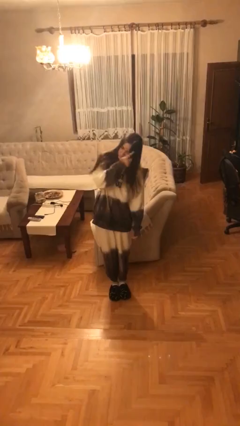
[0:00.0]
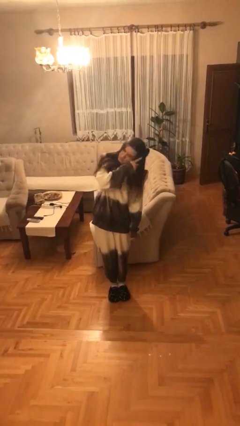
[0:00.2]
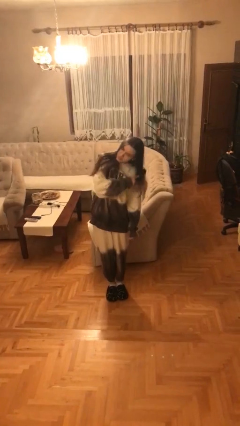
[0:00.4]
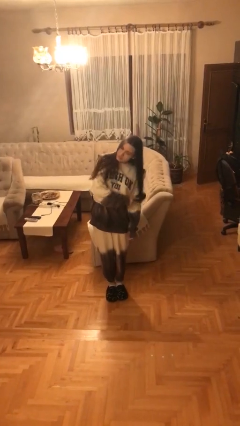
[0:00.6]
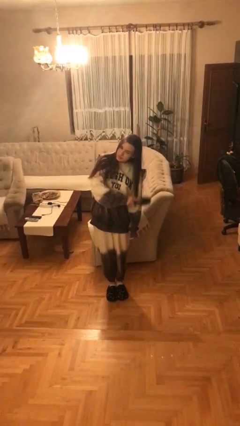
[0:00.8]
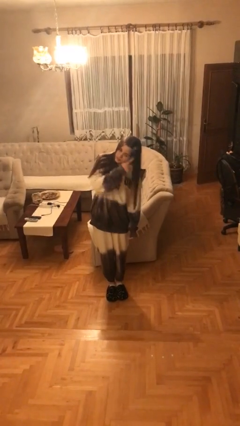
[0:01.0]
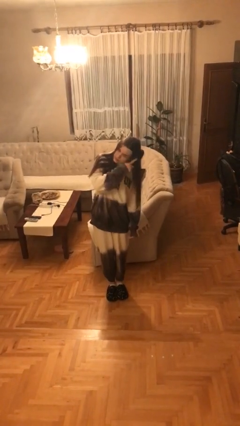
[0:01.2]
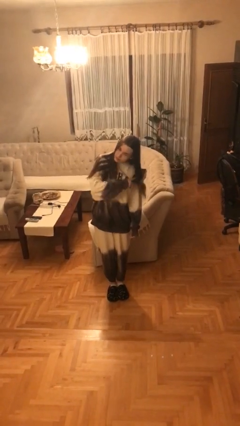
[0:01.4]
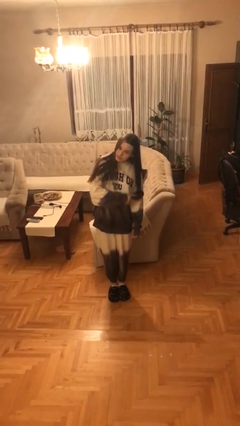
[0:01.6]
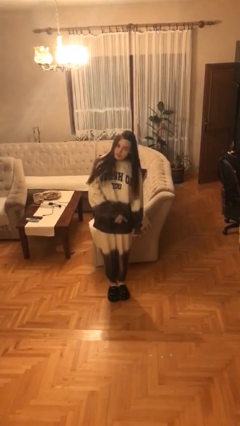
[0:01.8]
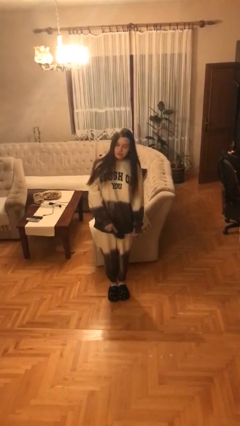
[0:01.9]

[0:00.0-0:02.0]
person brushes hair

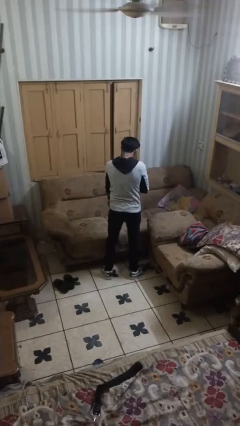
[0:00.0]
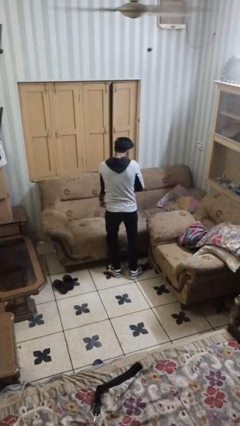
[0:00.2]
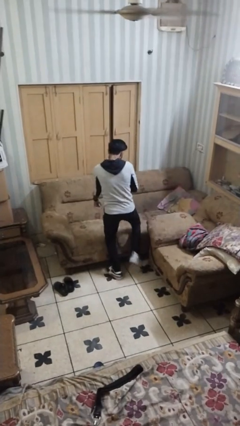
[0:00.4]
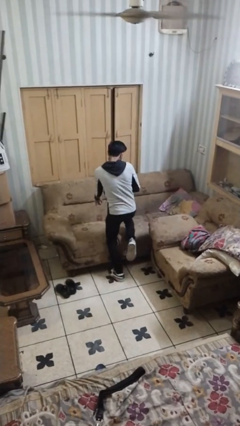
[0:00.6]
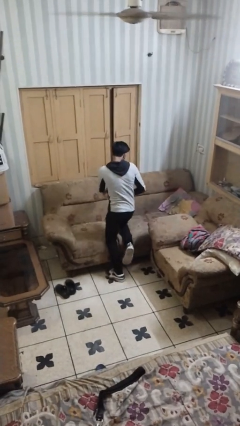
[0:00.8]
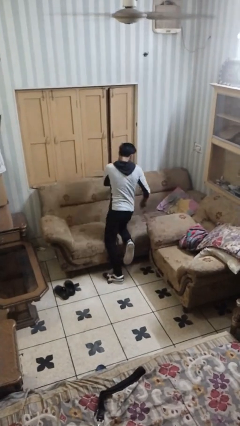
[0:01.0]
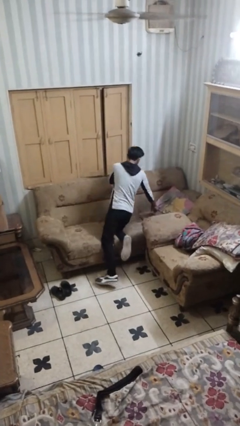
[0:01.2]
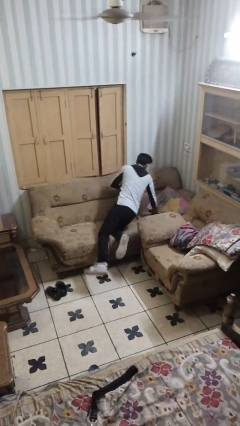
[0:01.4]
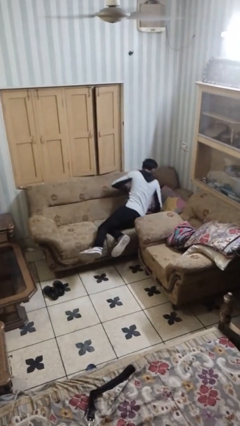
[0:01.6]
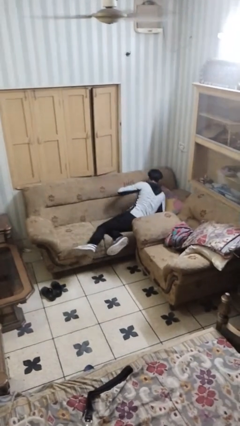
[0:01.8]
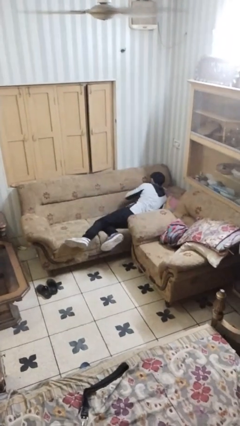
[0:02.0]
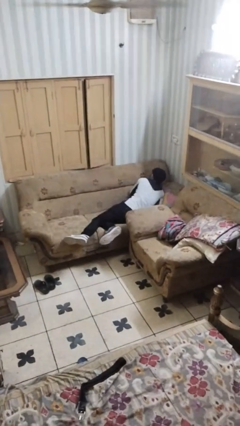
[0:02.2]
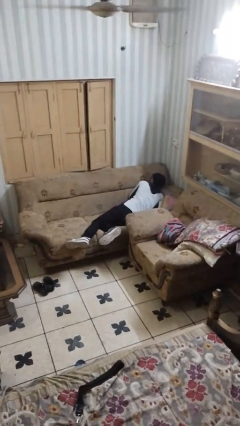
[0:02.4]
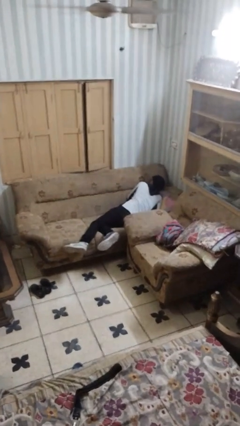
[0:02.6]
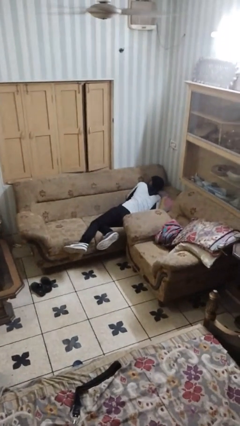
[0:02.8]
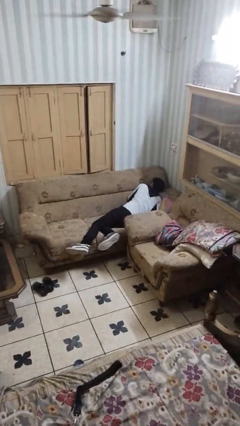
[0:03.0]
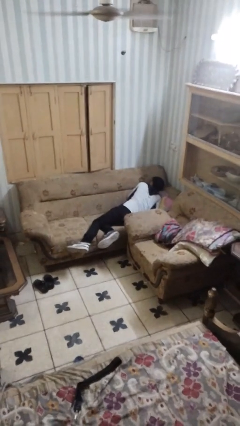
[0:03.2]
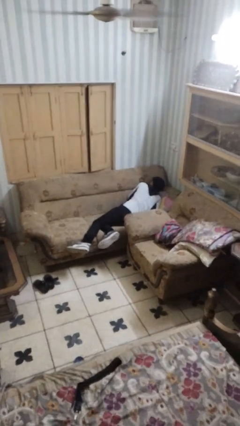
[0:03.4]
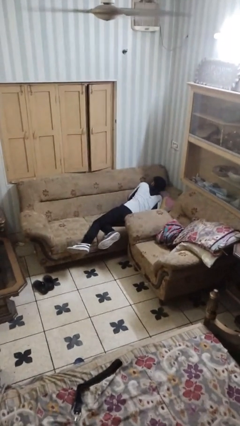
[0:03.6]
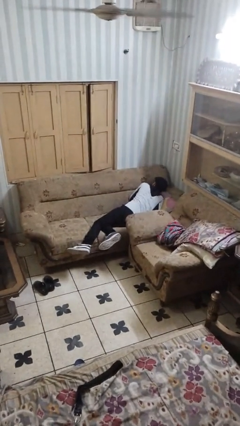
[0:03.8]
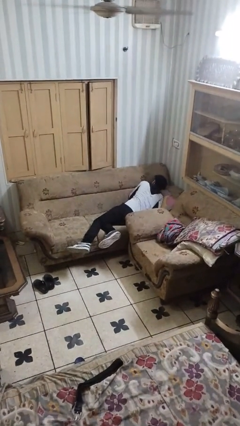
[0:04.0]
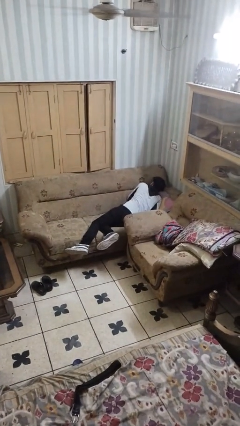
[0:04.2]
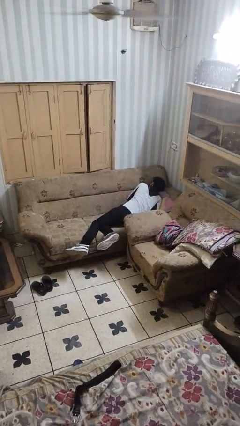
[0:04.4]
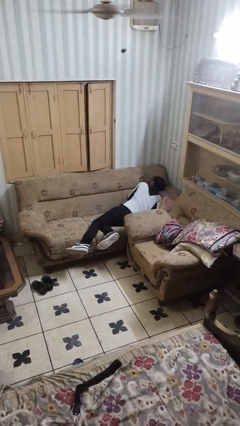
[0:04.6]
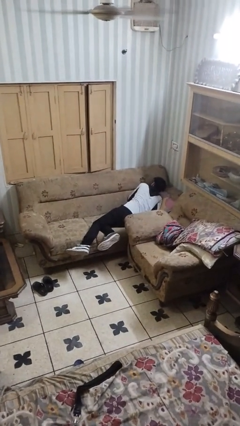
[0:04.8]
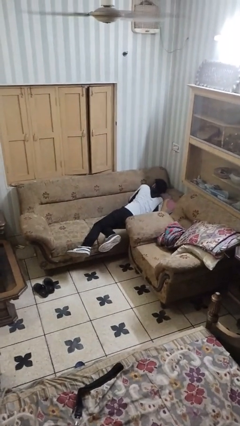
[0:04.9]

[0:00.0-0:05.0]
person lies down on couch

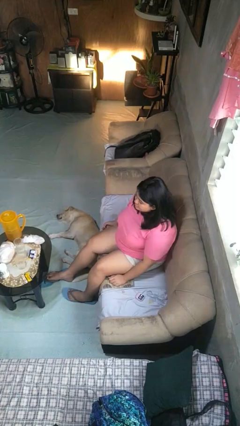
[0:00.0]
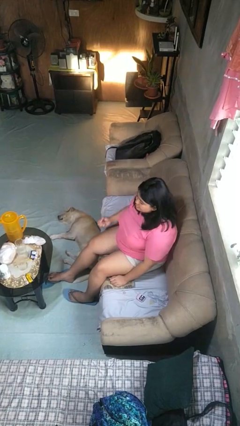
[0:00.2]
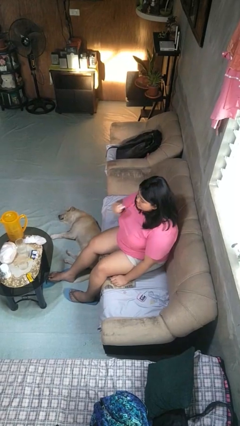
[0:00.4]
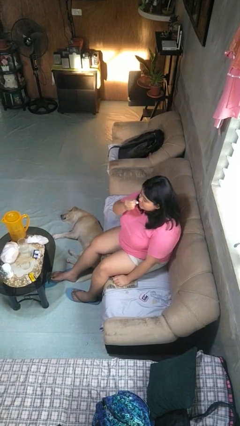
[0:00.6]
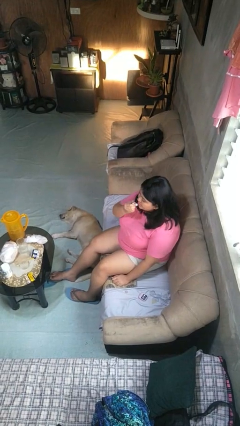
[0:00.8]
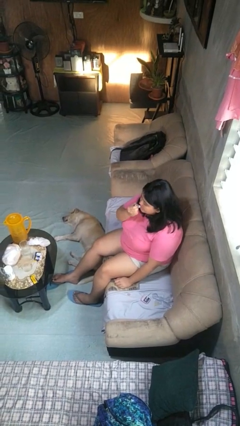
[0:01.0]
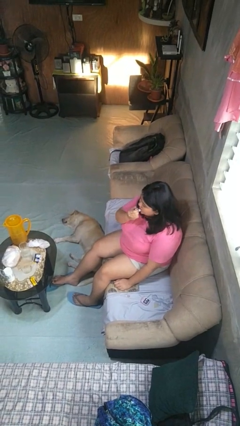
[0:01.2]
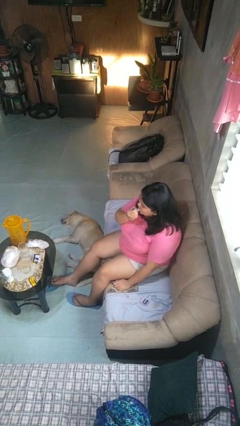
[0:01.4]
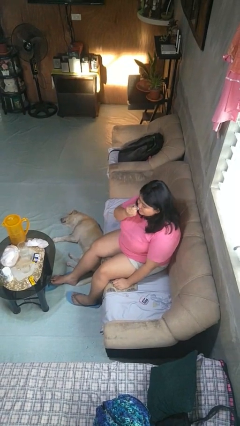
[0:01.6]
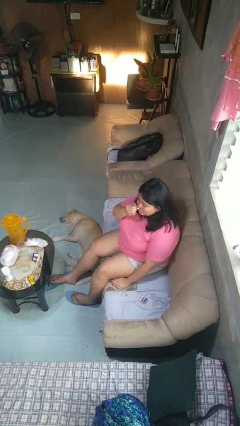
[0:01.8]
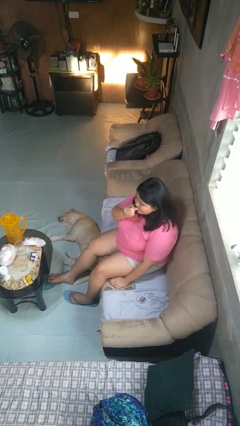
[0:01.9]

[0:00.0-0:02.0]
person applies lip makeup

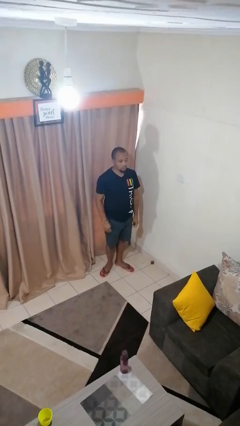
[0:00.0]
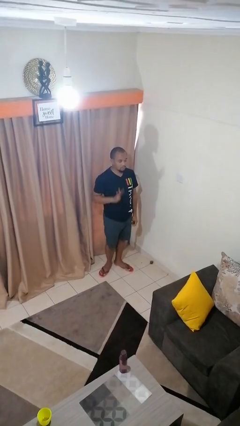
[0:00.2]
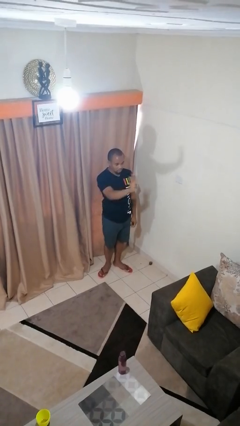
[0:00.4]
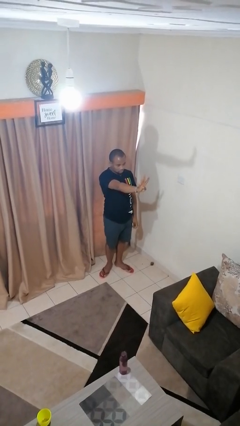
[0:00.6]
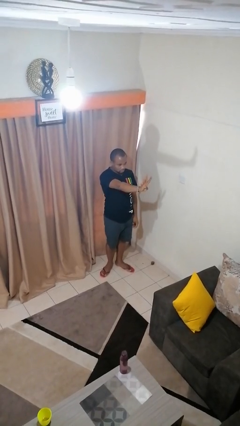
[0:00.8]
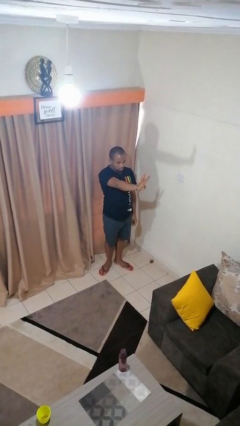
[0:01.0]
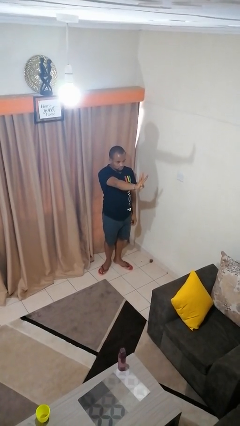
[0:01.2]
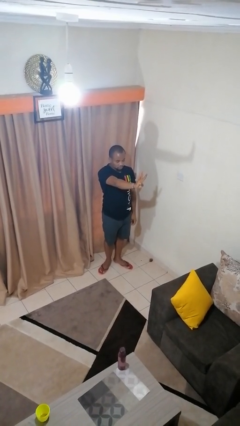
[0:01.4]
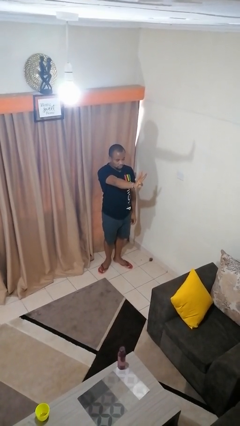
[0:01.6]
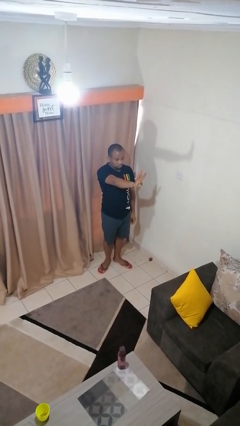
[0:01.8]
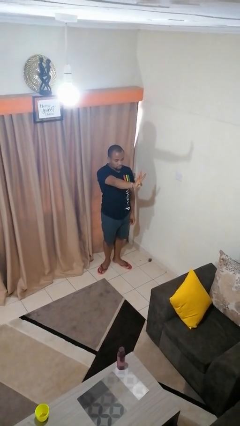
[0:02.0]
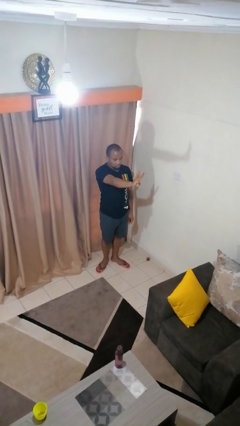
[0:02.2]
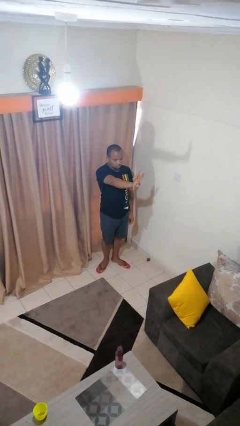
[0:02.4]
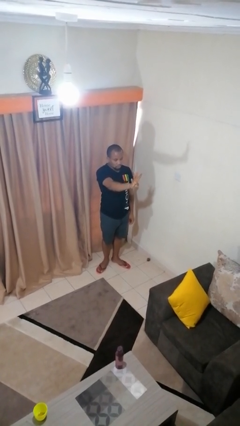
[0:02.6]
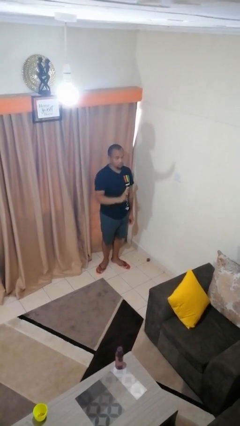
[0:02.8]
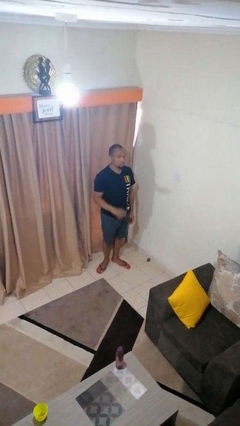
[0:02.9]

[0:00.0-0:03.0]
person gestures number four

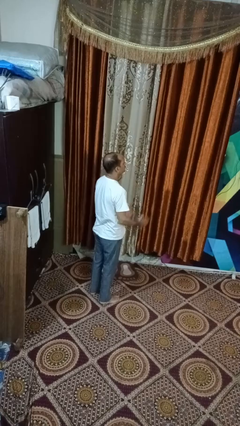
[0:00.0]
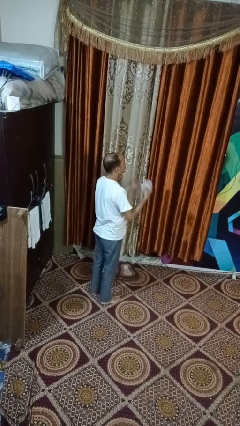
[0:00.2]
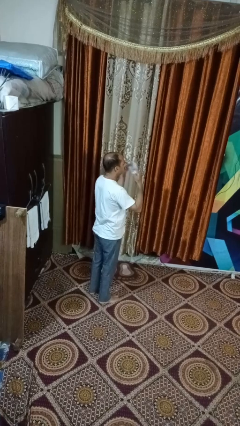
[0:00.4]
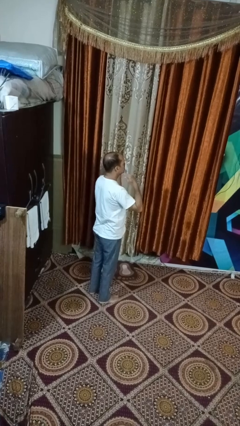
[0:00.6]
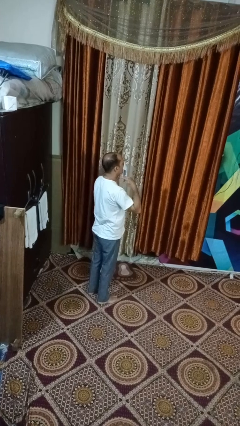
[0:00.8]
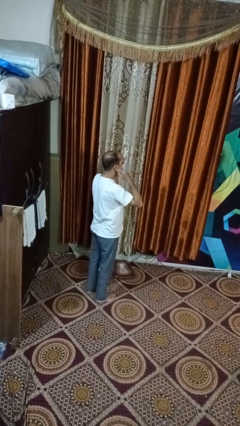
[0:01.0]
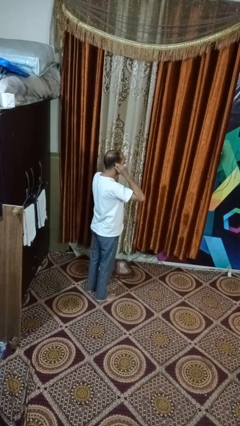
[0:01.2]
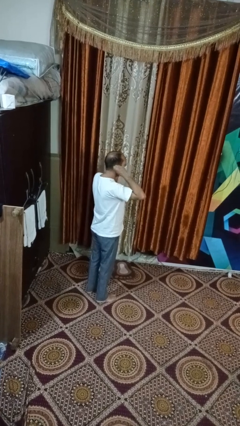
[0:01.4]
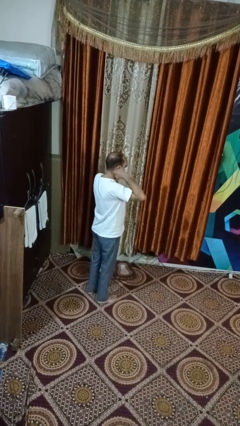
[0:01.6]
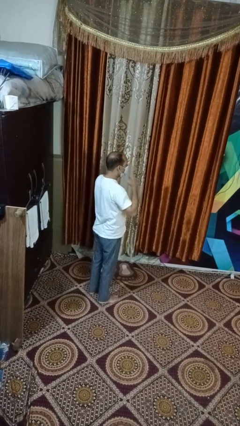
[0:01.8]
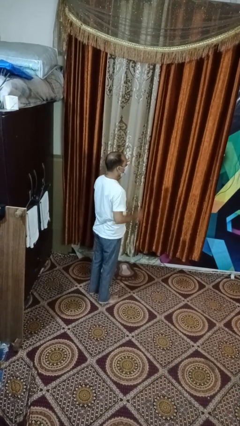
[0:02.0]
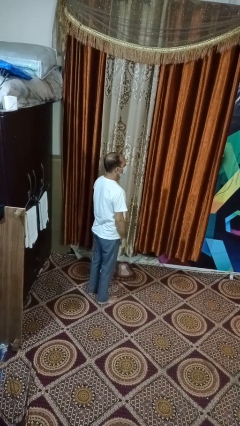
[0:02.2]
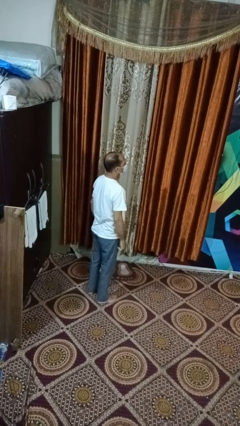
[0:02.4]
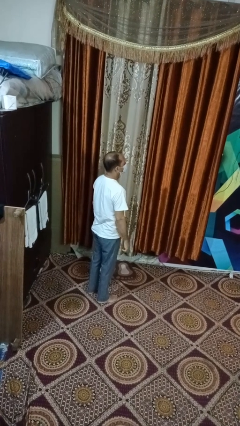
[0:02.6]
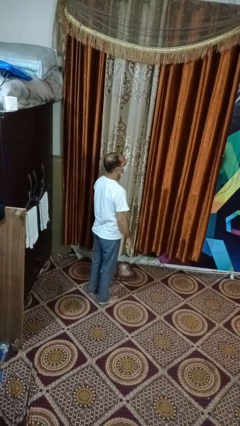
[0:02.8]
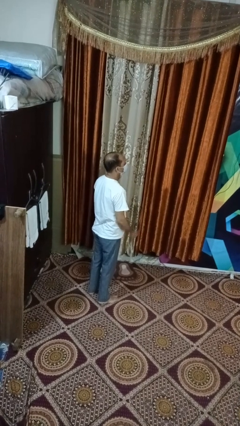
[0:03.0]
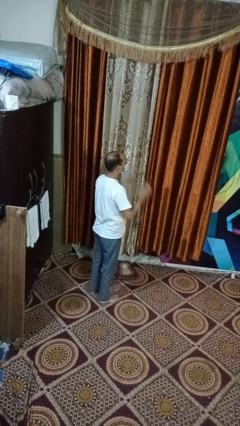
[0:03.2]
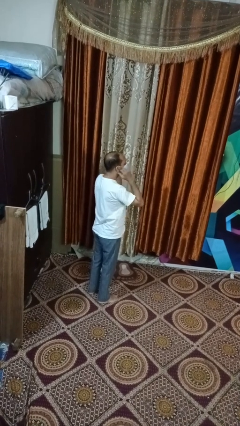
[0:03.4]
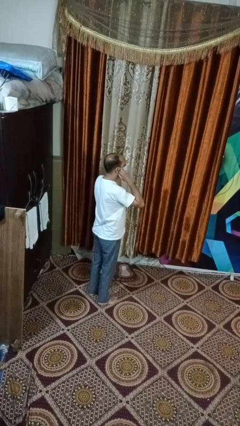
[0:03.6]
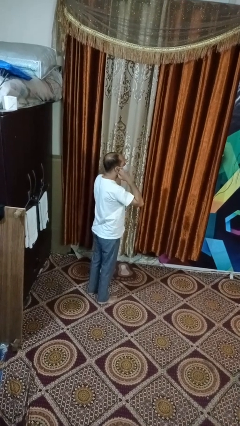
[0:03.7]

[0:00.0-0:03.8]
person puts on facemask

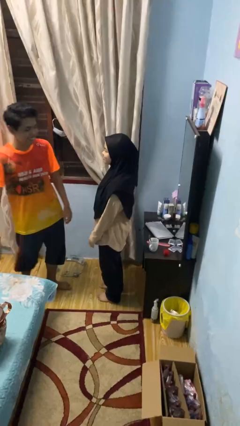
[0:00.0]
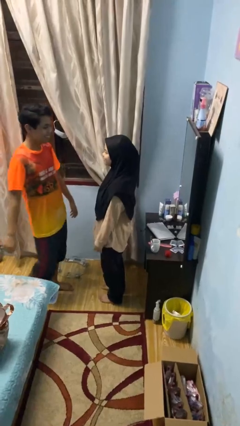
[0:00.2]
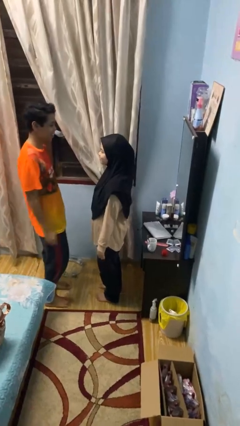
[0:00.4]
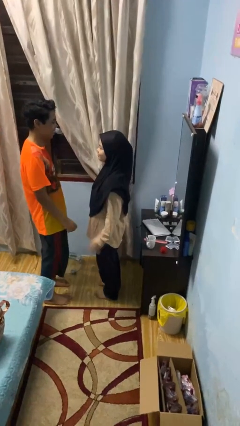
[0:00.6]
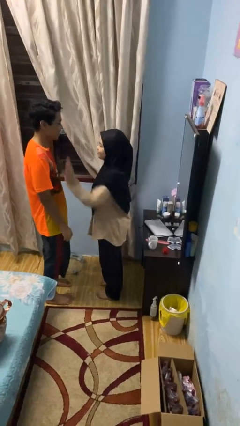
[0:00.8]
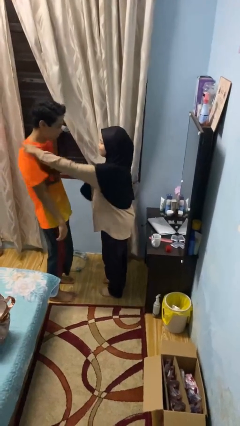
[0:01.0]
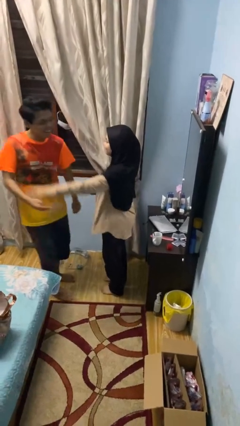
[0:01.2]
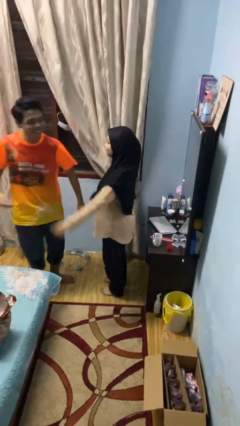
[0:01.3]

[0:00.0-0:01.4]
person shoves person
